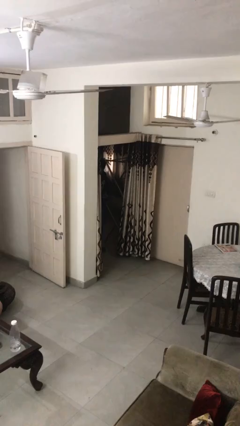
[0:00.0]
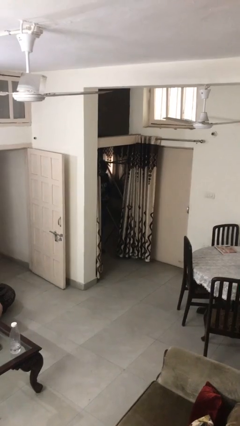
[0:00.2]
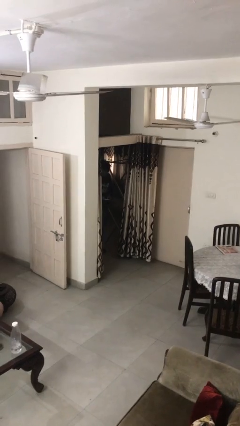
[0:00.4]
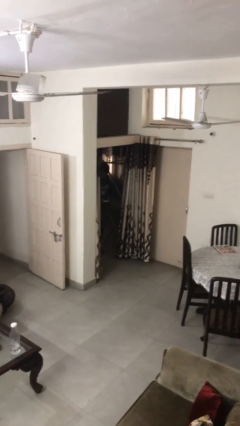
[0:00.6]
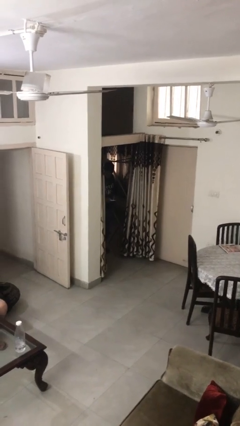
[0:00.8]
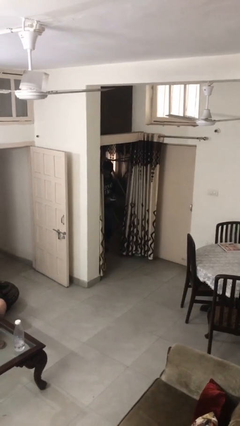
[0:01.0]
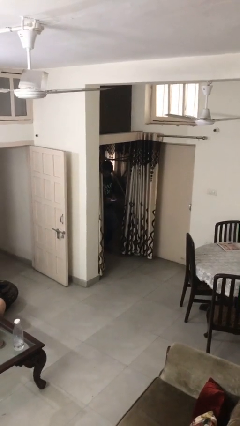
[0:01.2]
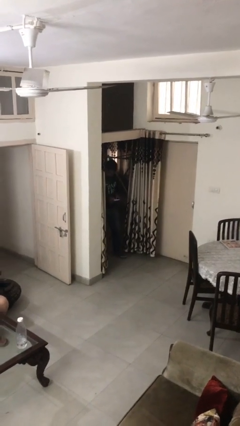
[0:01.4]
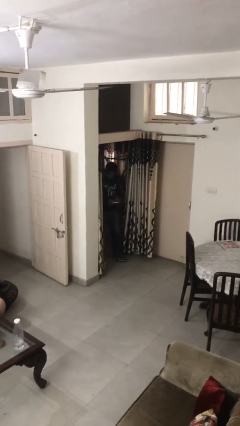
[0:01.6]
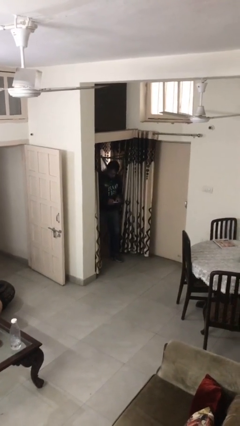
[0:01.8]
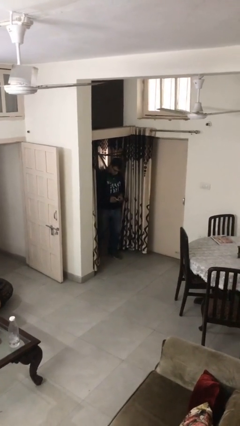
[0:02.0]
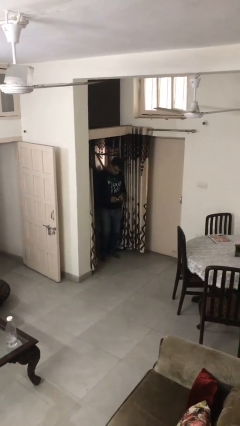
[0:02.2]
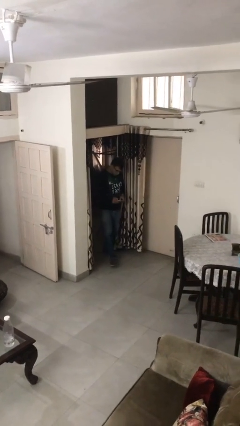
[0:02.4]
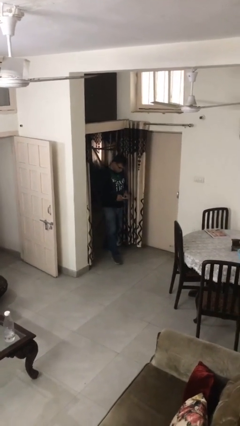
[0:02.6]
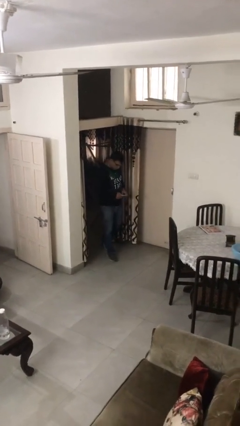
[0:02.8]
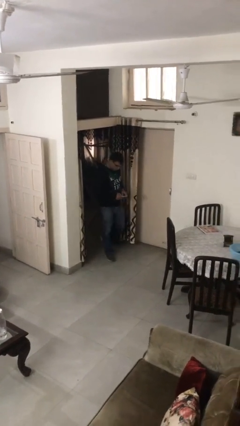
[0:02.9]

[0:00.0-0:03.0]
person enters scene through structure

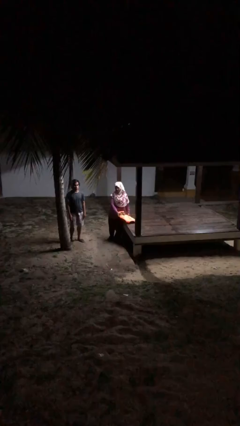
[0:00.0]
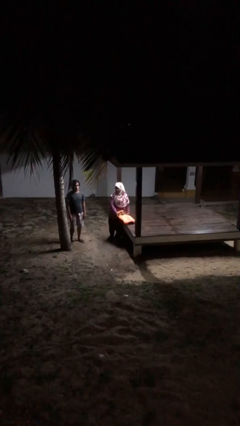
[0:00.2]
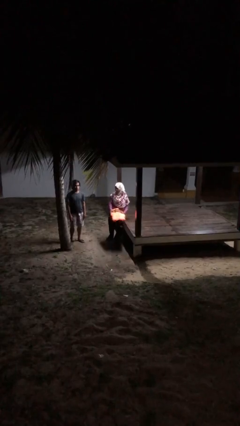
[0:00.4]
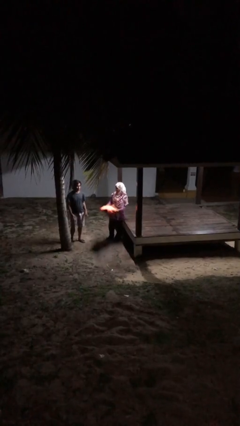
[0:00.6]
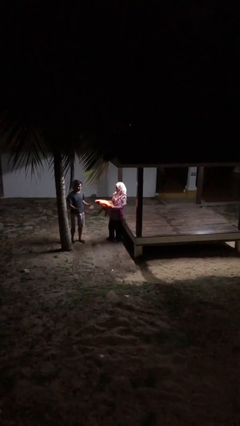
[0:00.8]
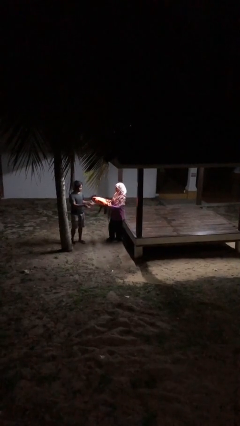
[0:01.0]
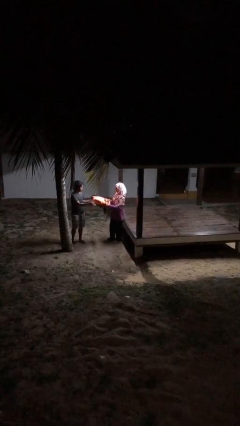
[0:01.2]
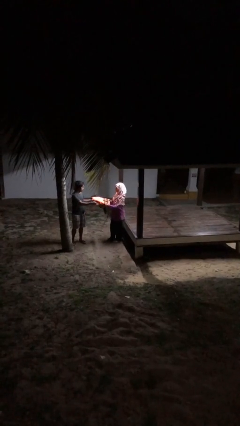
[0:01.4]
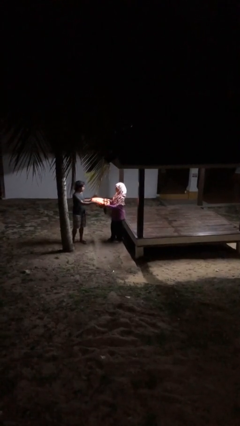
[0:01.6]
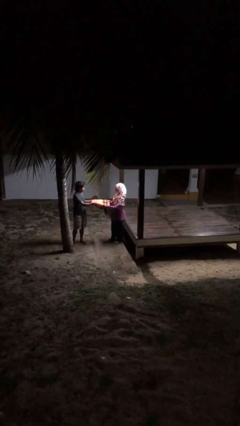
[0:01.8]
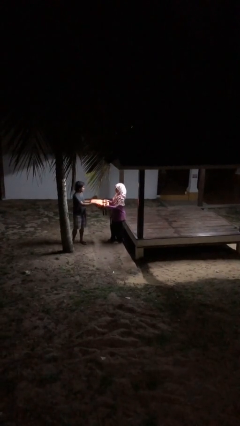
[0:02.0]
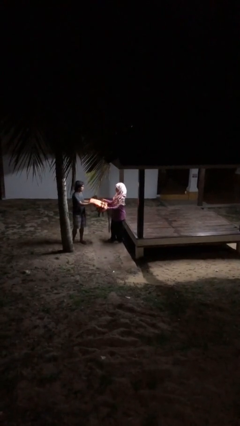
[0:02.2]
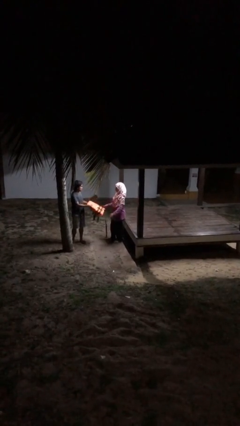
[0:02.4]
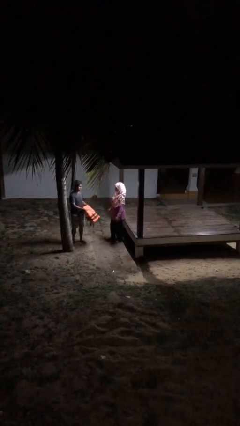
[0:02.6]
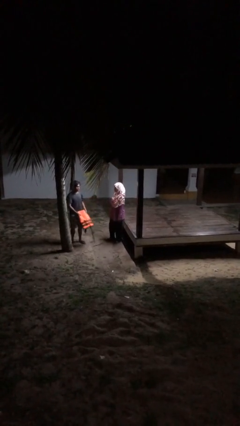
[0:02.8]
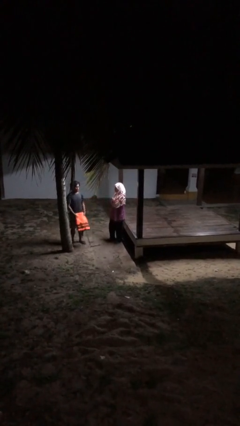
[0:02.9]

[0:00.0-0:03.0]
person transfers object to person

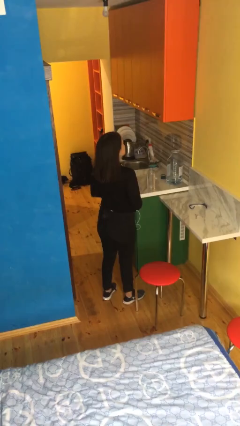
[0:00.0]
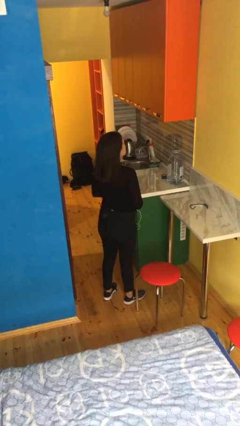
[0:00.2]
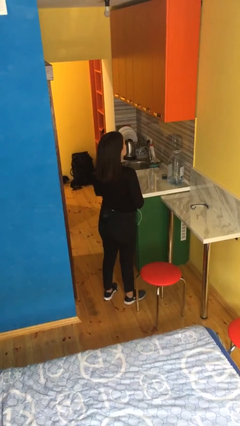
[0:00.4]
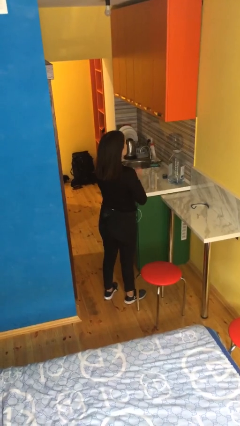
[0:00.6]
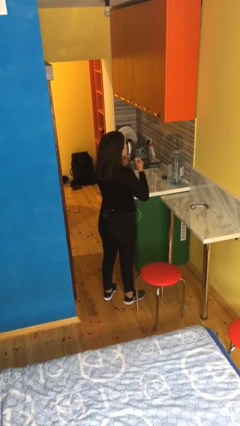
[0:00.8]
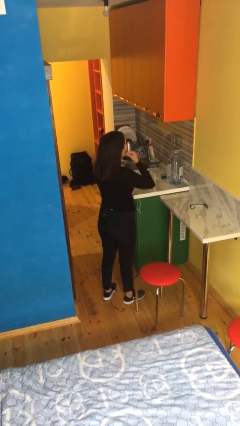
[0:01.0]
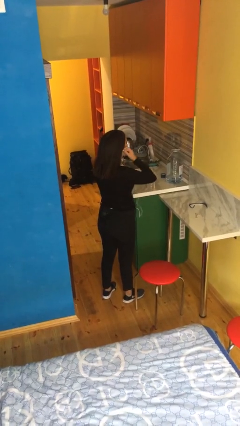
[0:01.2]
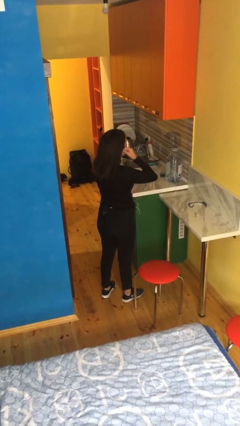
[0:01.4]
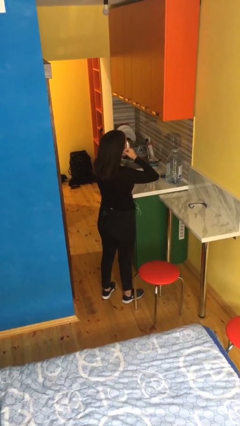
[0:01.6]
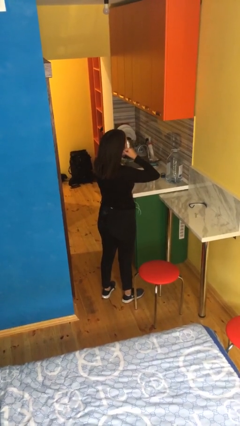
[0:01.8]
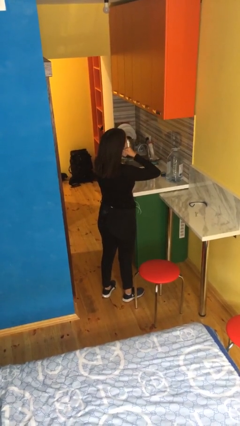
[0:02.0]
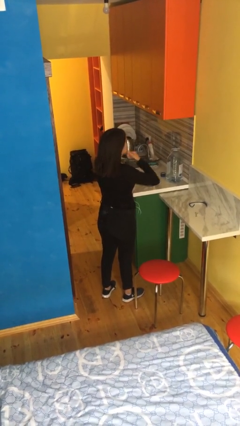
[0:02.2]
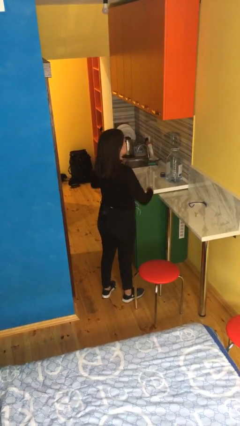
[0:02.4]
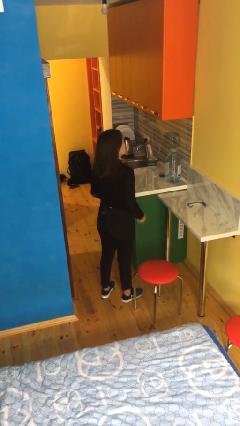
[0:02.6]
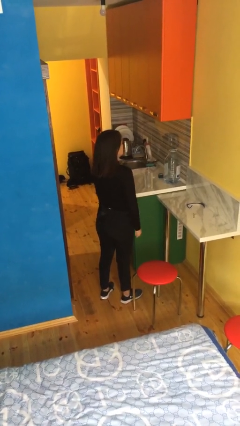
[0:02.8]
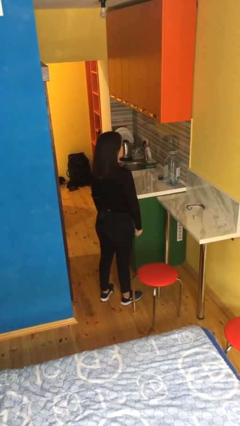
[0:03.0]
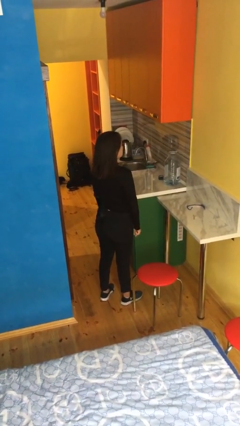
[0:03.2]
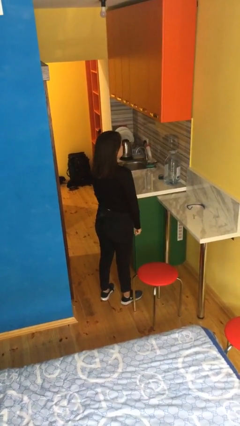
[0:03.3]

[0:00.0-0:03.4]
person puts on headphones

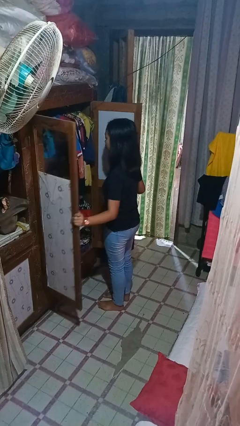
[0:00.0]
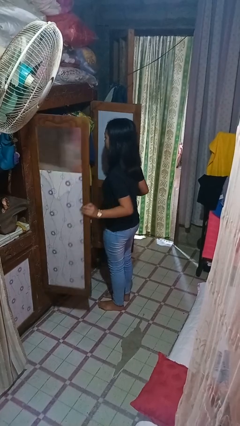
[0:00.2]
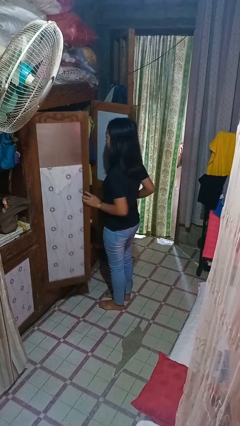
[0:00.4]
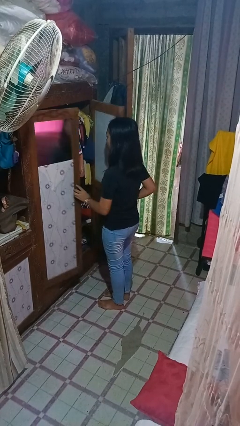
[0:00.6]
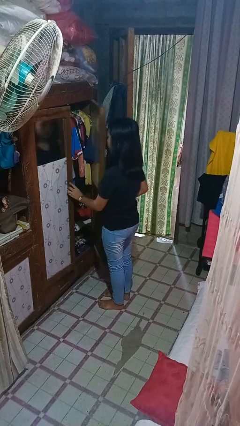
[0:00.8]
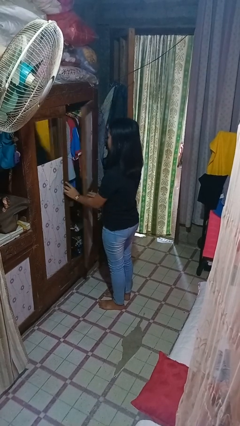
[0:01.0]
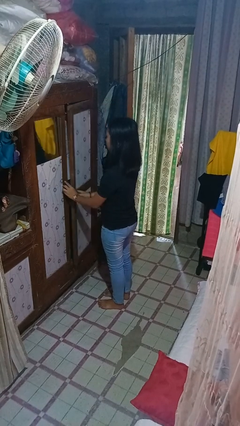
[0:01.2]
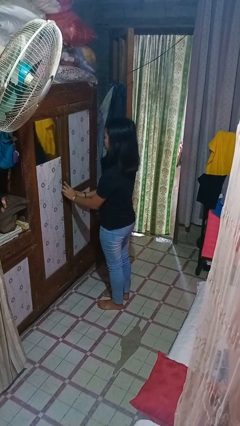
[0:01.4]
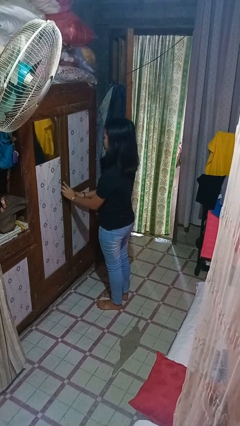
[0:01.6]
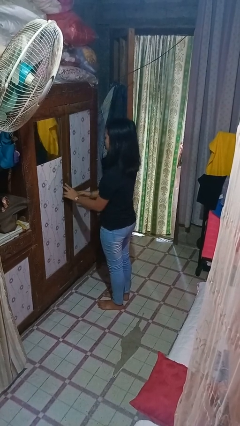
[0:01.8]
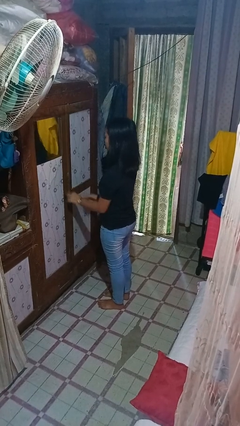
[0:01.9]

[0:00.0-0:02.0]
person closes closet door

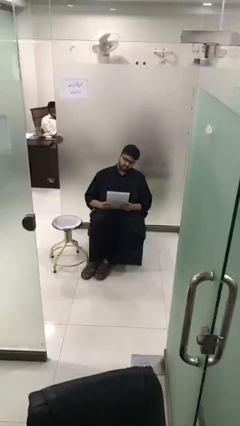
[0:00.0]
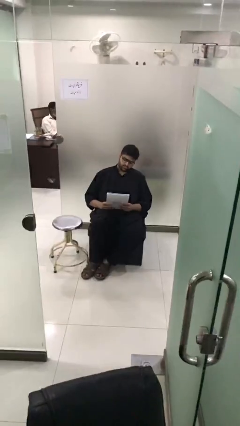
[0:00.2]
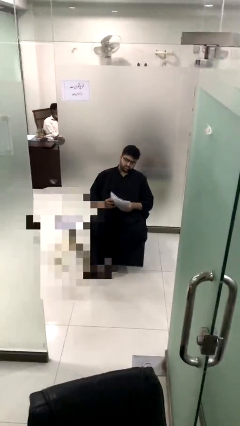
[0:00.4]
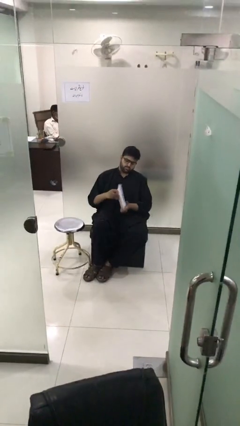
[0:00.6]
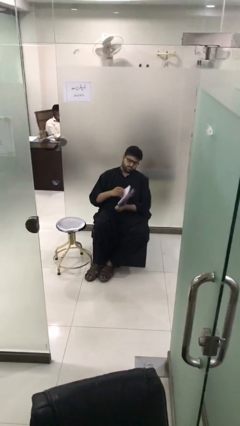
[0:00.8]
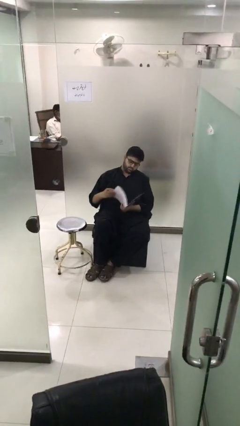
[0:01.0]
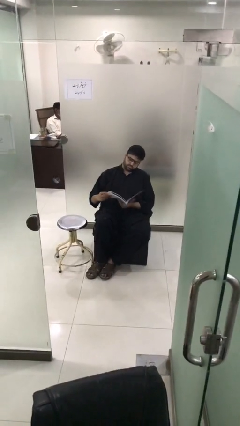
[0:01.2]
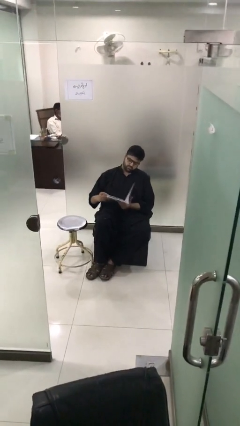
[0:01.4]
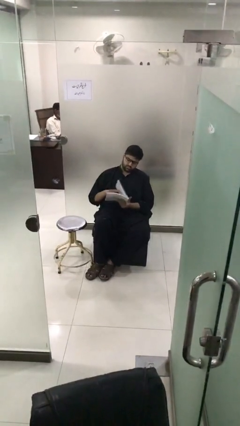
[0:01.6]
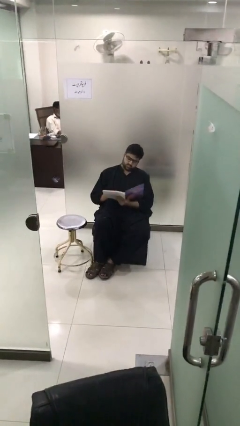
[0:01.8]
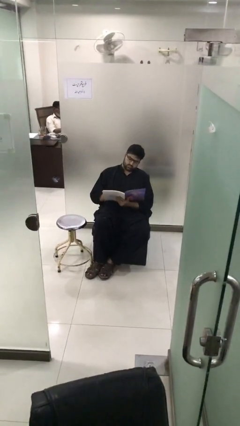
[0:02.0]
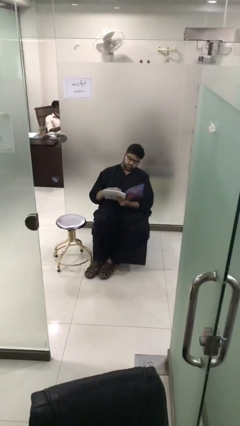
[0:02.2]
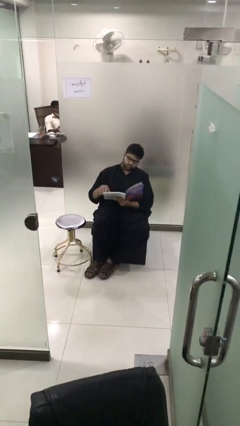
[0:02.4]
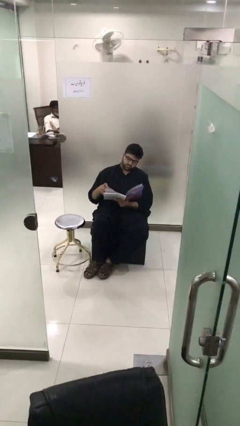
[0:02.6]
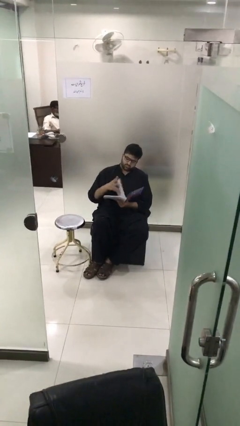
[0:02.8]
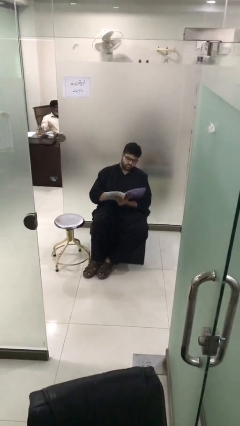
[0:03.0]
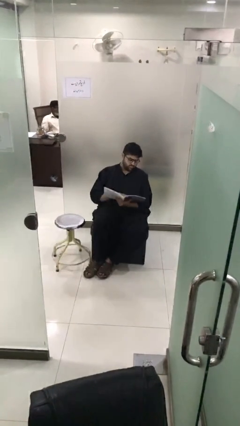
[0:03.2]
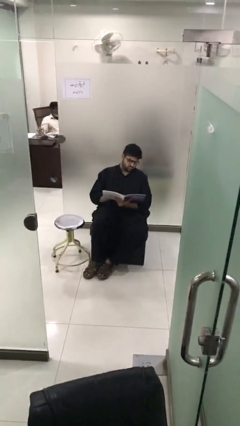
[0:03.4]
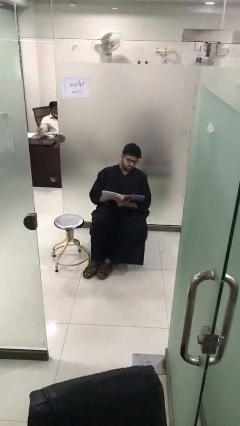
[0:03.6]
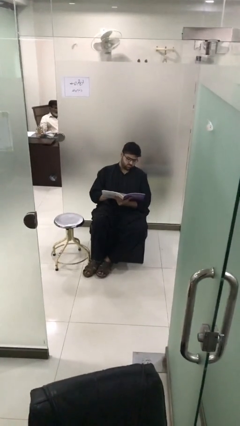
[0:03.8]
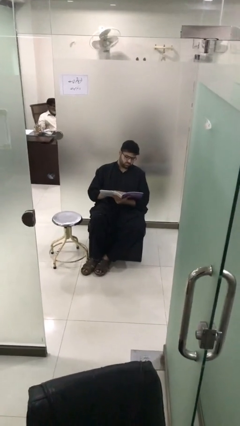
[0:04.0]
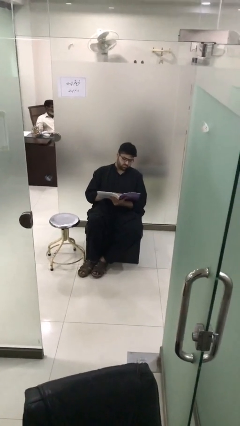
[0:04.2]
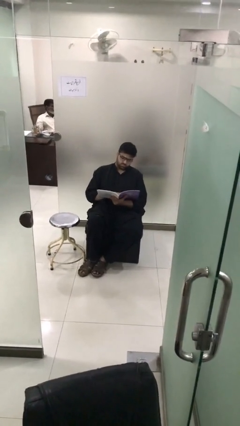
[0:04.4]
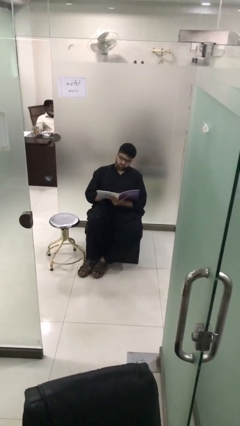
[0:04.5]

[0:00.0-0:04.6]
person reads document

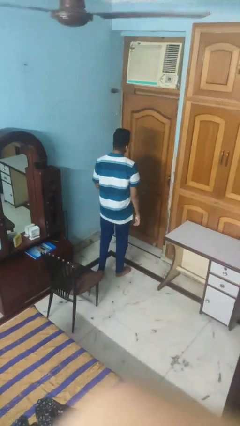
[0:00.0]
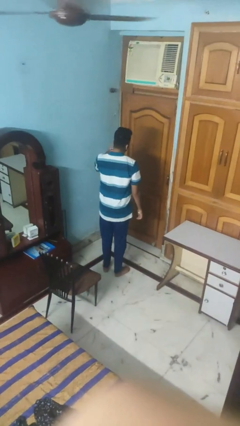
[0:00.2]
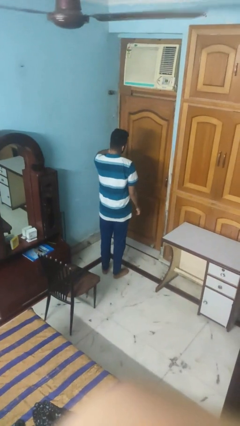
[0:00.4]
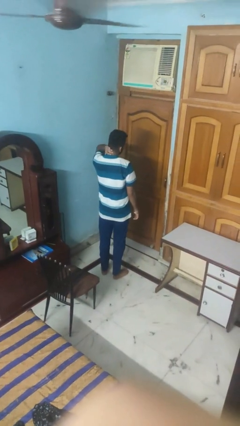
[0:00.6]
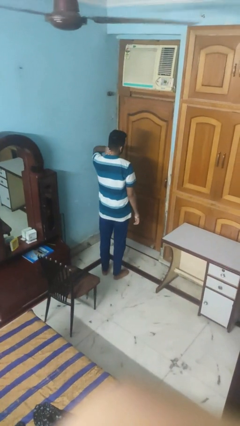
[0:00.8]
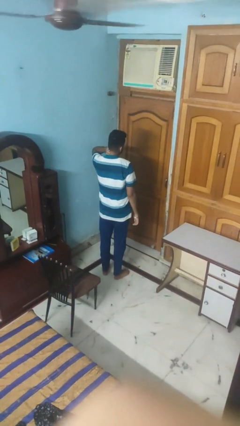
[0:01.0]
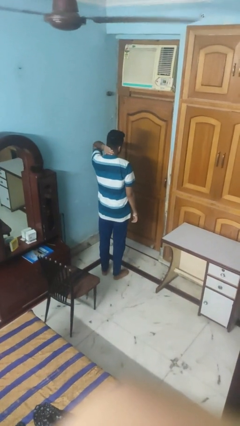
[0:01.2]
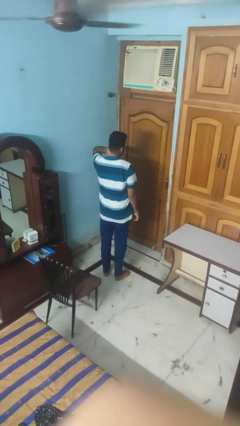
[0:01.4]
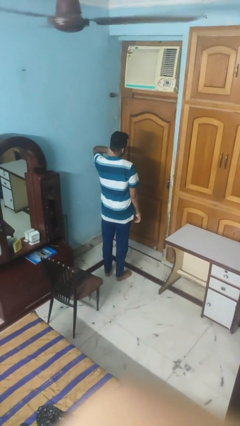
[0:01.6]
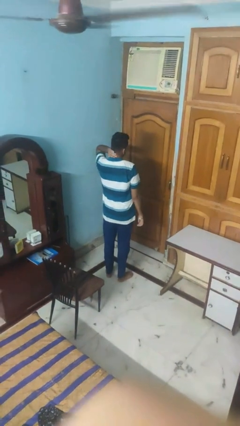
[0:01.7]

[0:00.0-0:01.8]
person rubs neck
